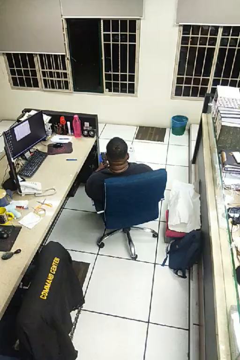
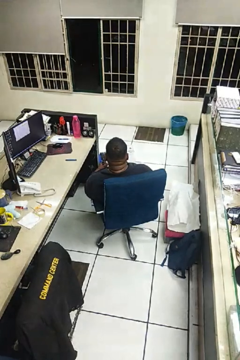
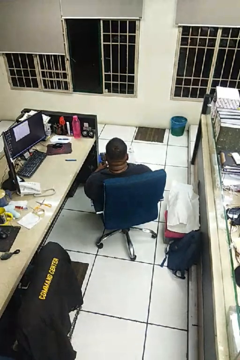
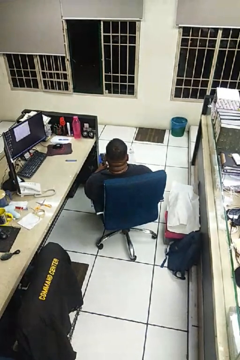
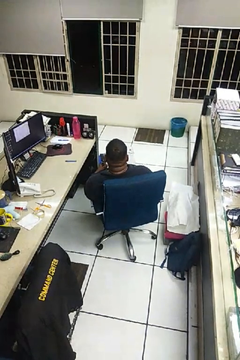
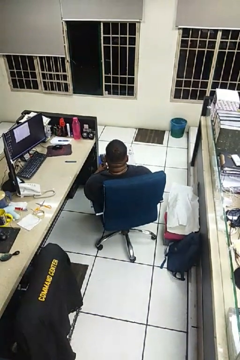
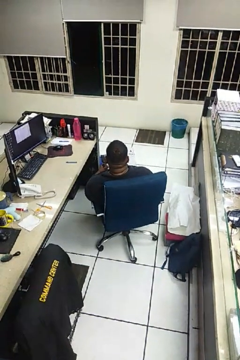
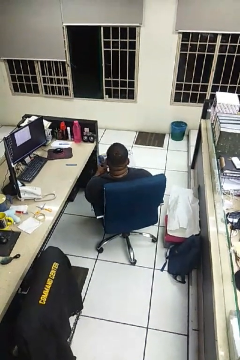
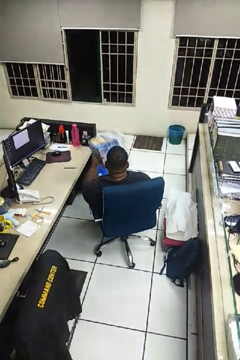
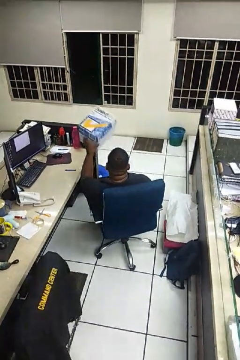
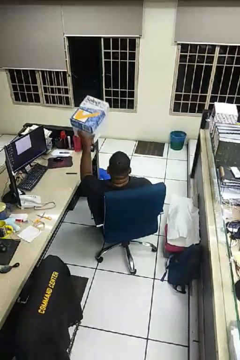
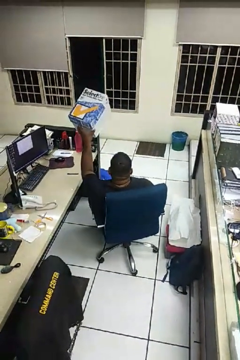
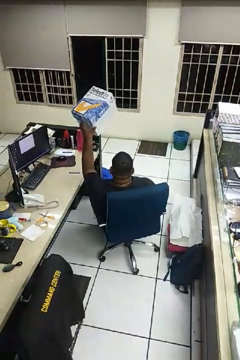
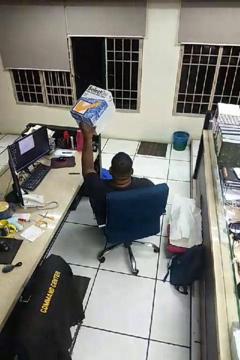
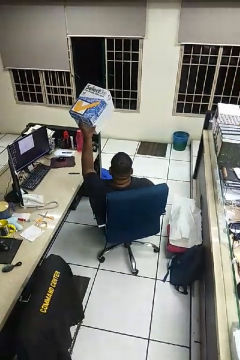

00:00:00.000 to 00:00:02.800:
person holds object above head

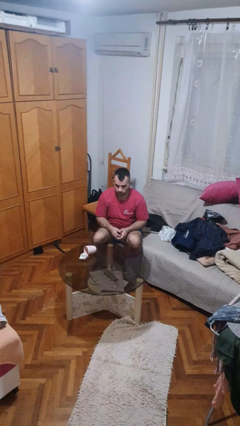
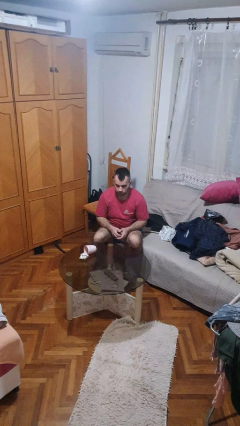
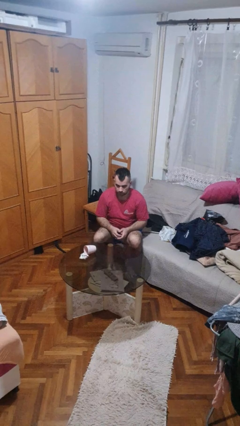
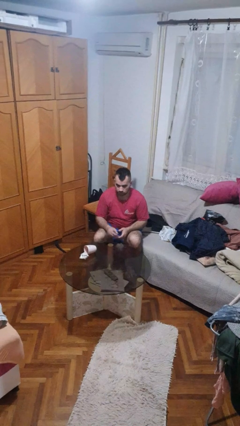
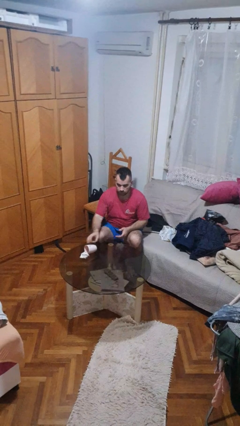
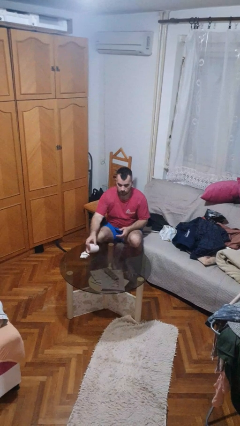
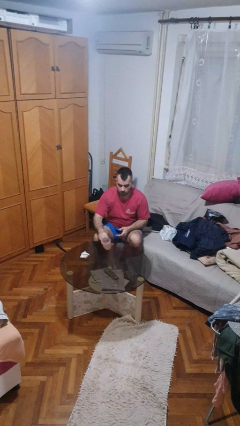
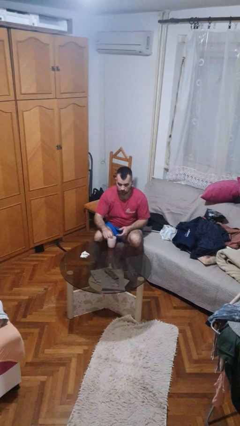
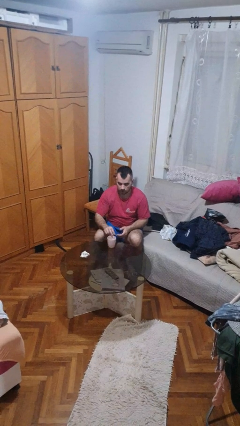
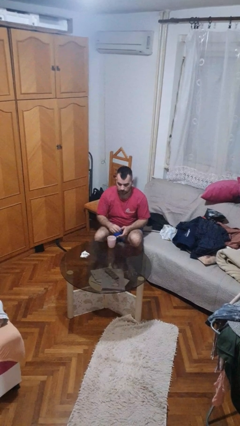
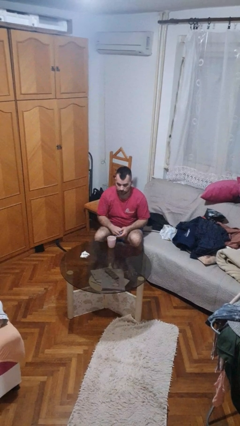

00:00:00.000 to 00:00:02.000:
person sets upright glass

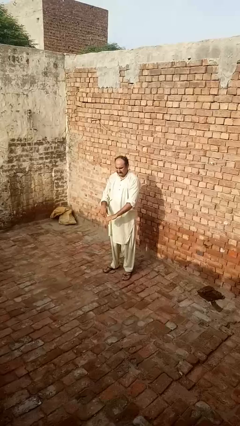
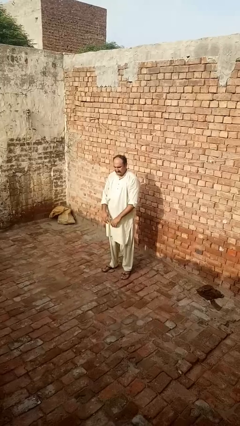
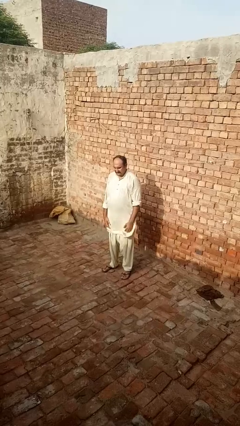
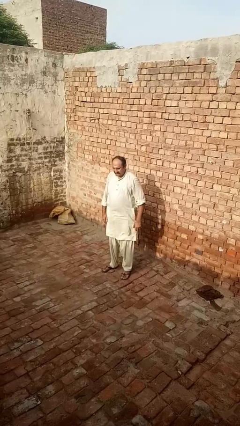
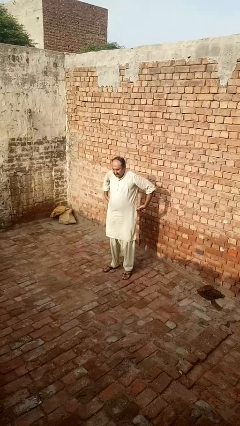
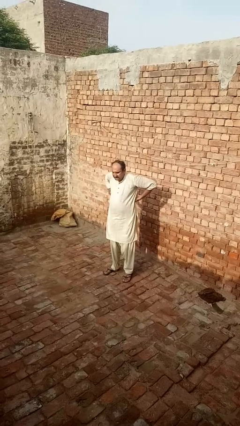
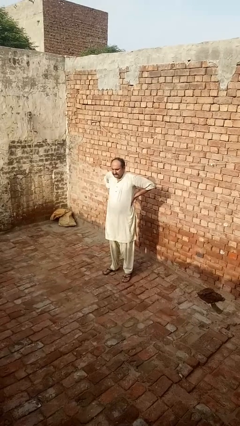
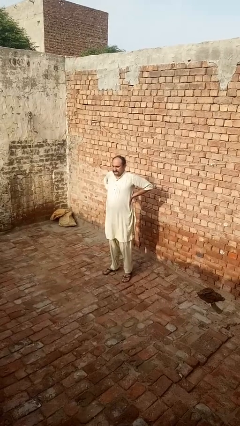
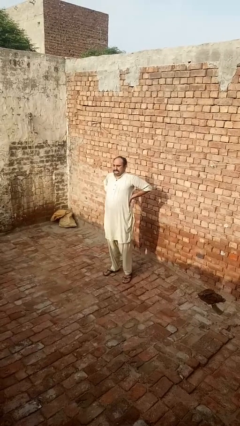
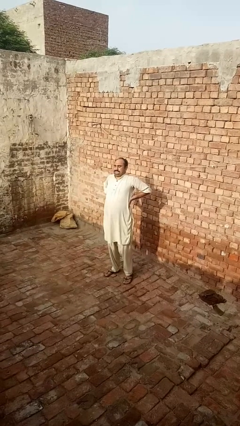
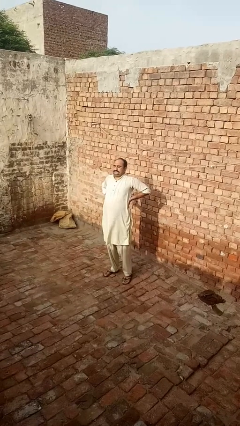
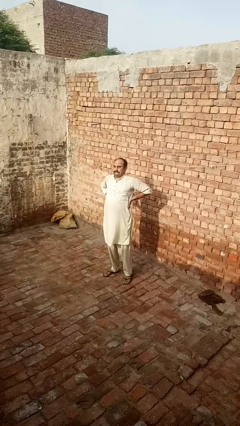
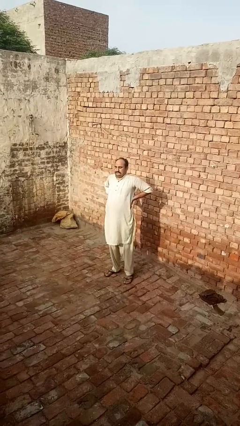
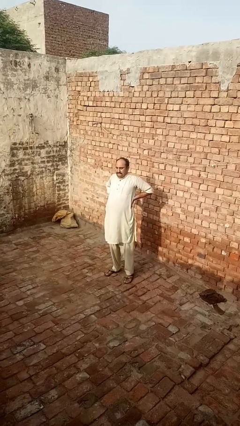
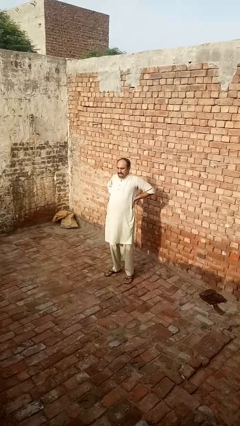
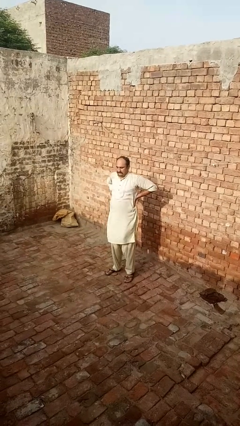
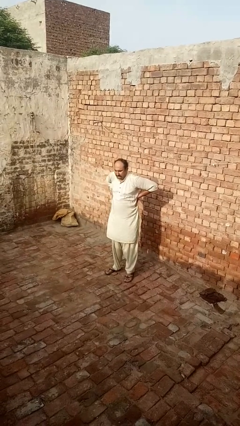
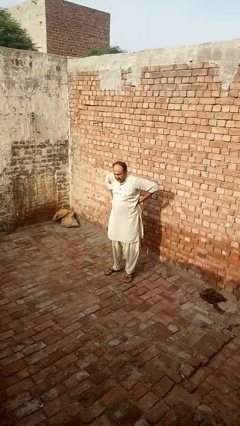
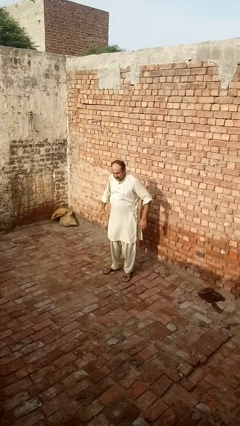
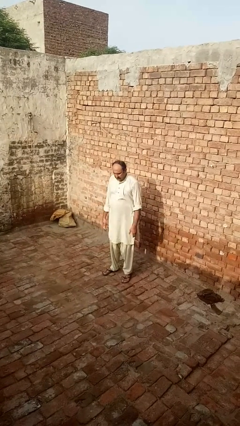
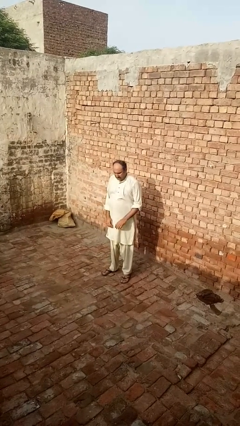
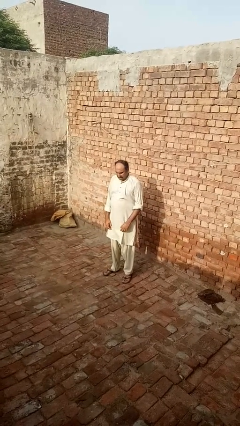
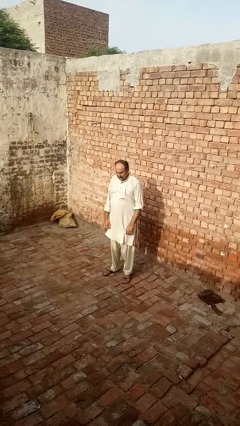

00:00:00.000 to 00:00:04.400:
person stretches back

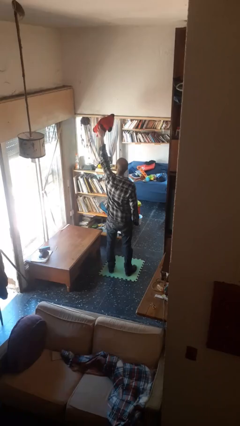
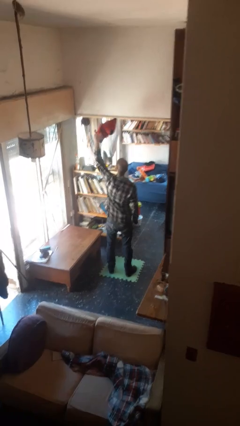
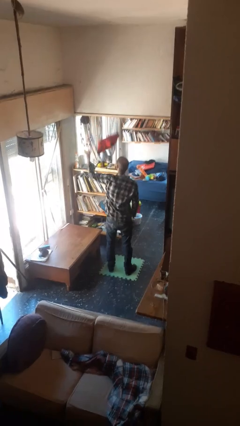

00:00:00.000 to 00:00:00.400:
person drops object

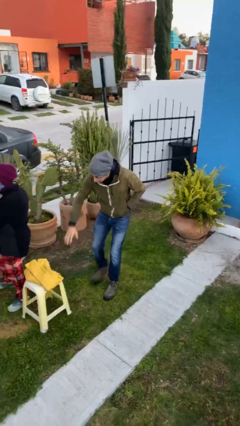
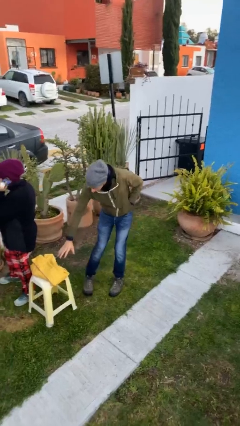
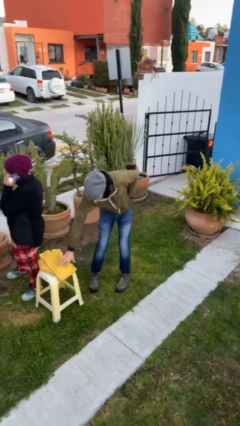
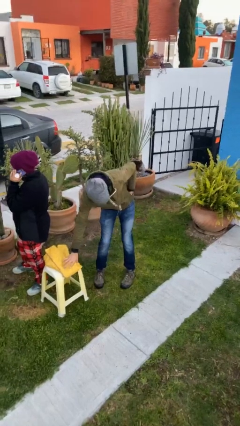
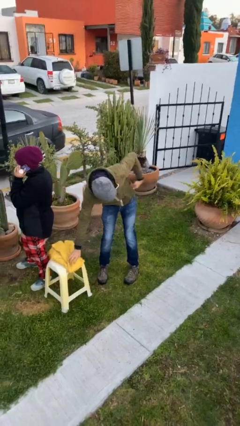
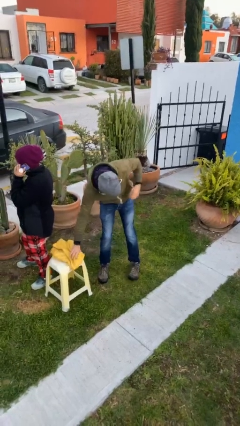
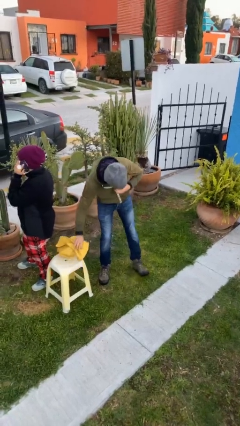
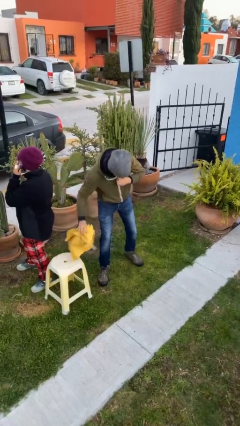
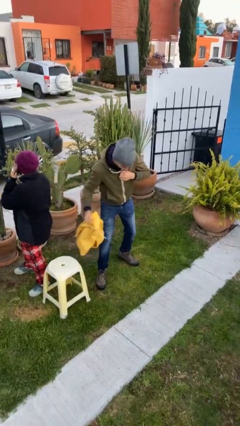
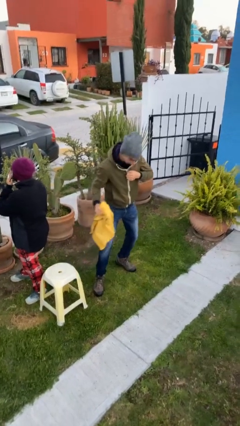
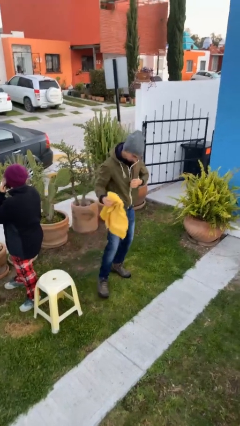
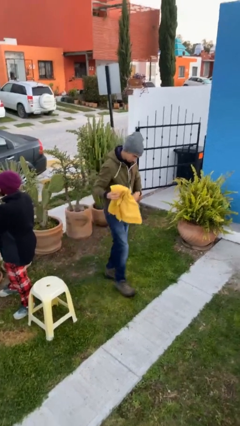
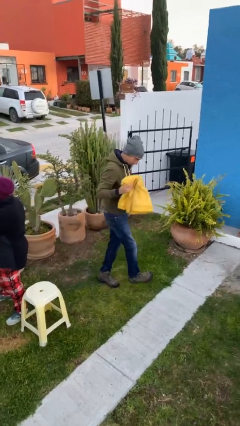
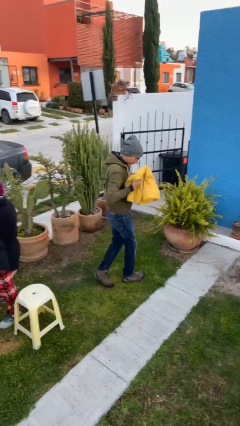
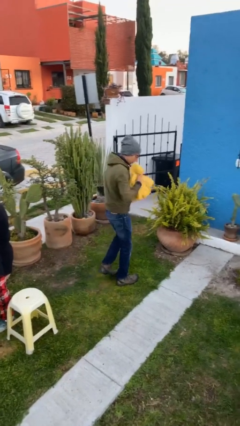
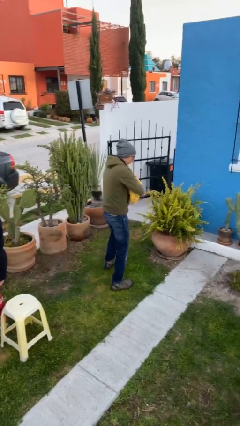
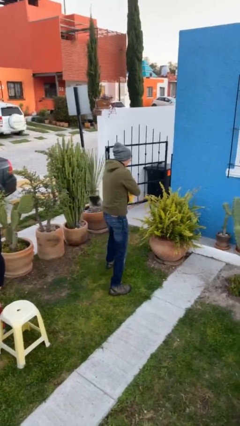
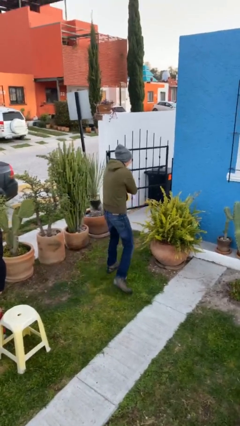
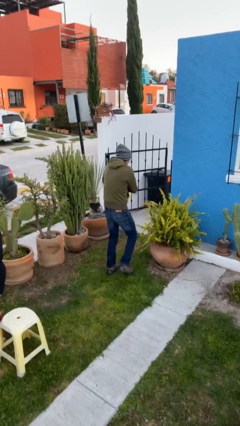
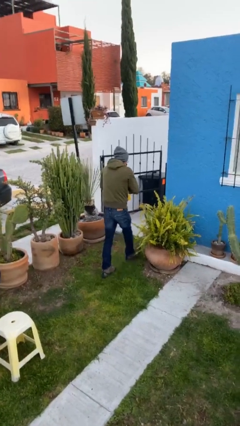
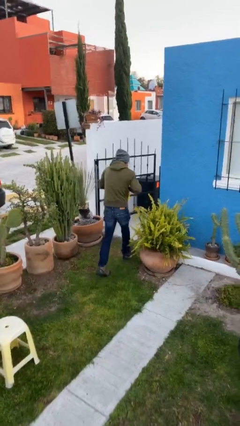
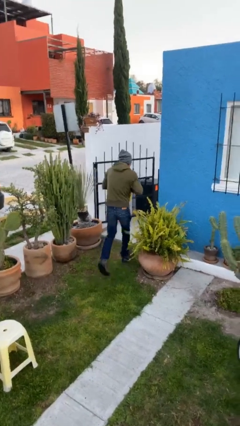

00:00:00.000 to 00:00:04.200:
person steals object from person

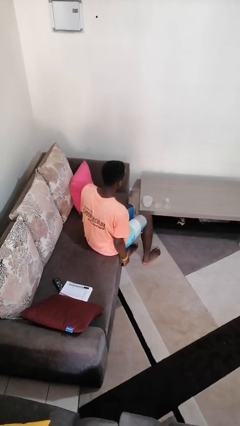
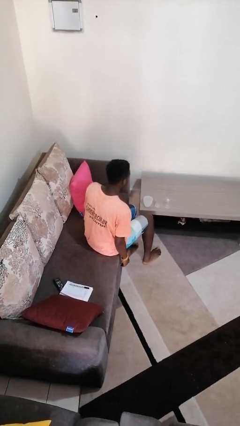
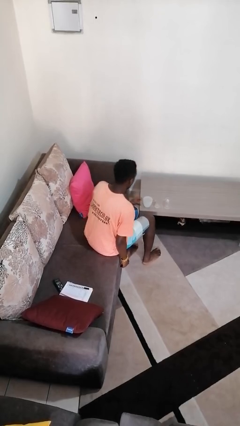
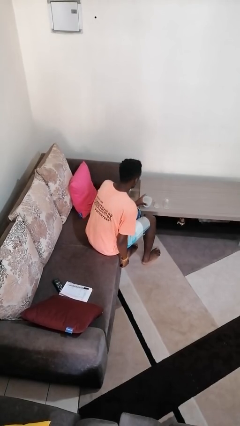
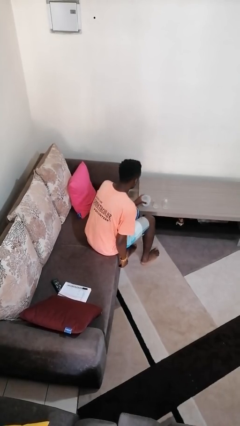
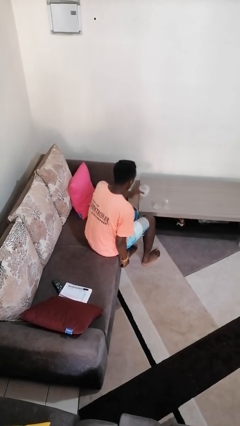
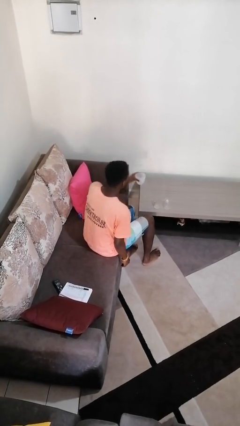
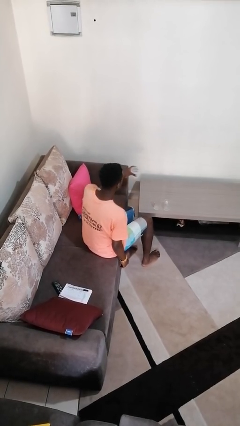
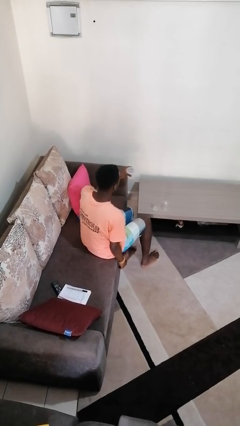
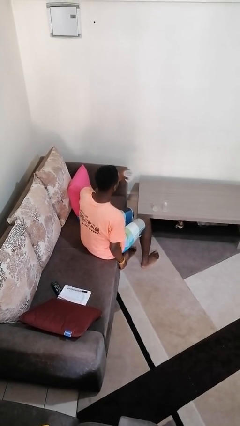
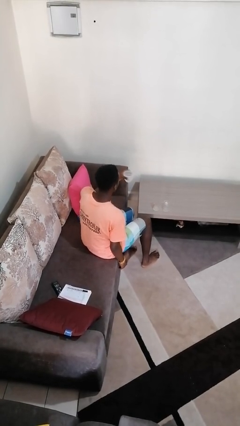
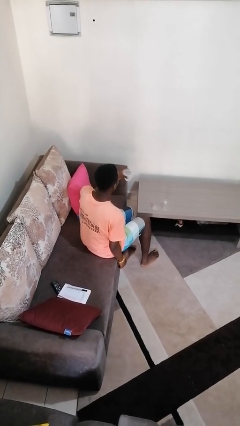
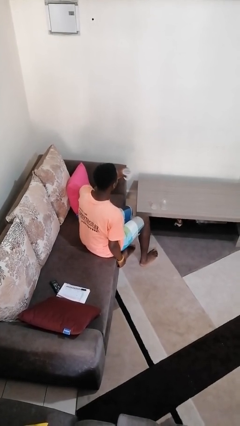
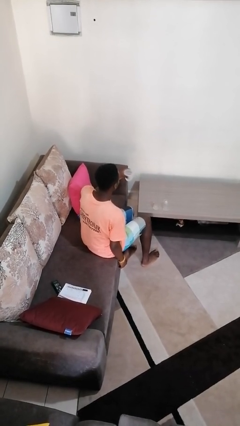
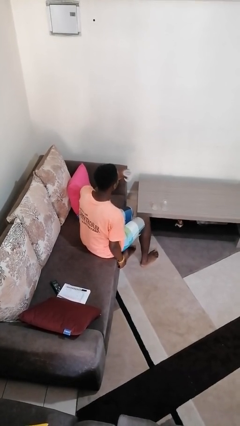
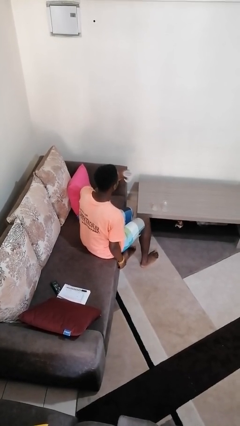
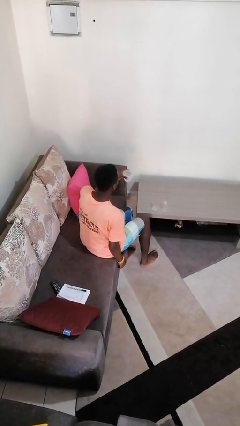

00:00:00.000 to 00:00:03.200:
person picks up object from table

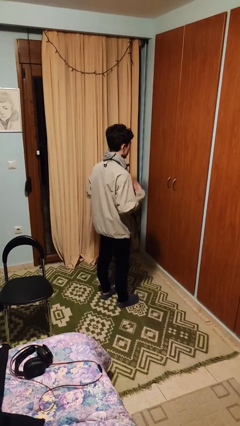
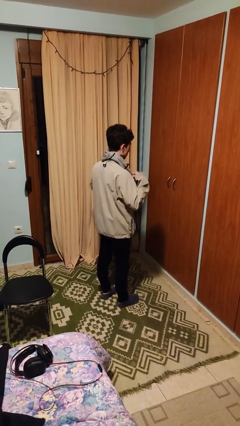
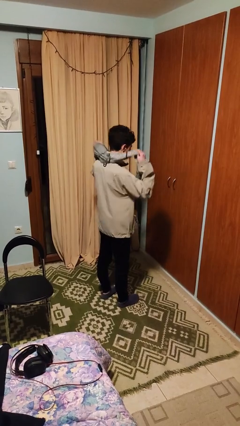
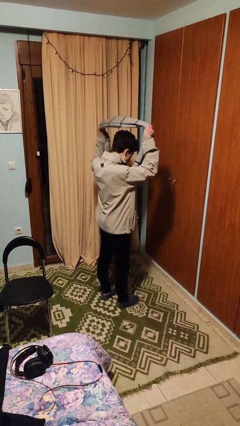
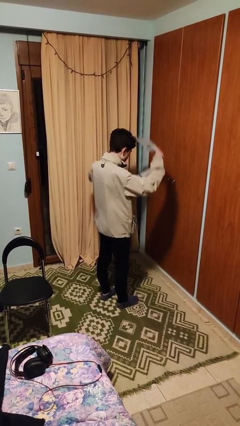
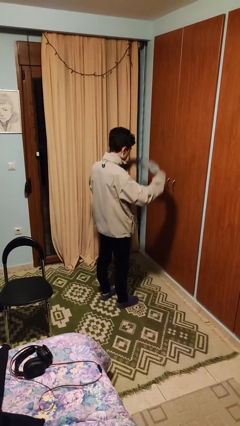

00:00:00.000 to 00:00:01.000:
person takes off scarf
